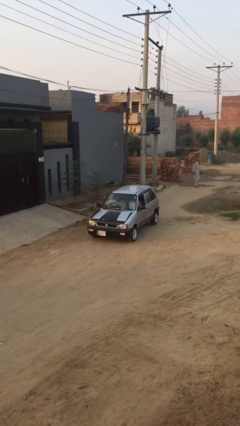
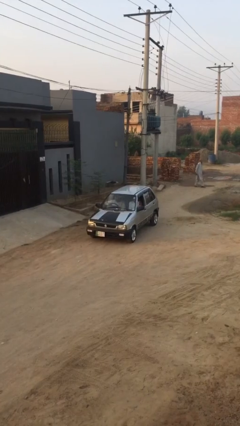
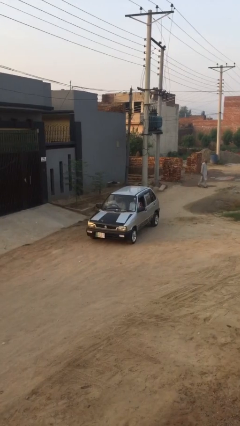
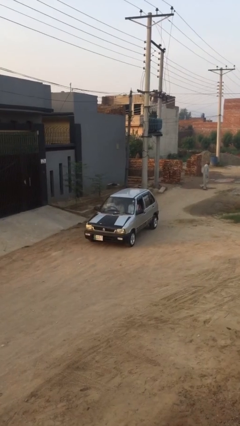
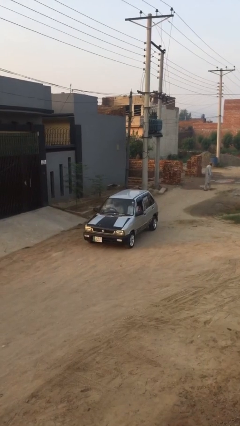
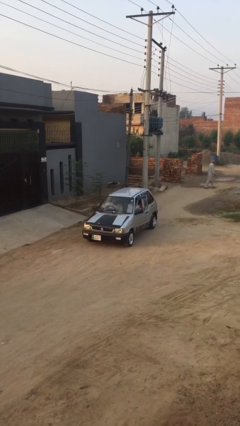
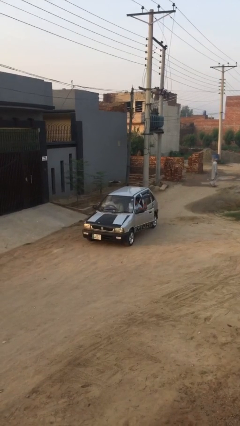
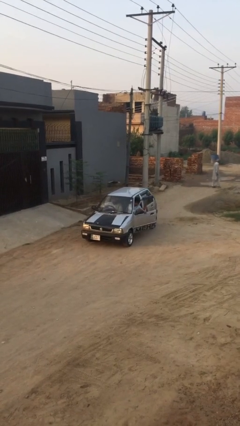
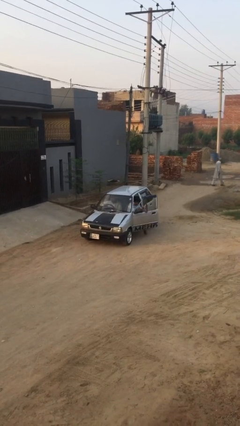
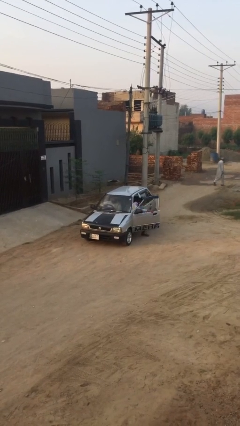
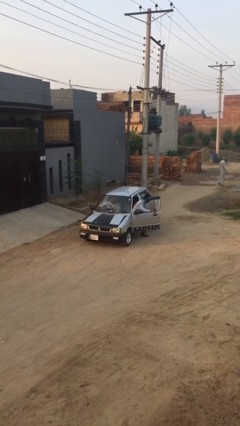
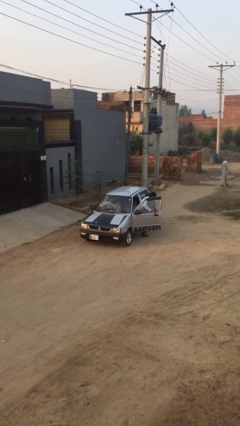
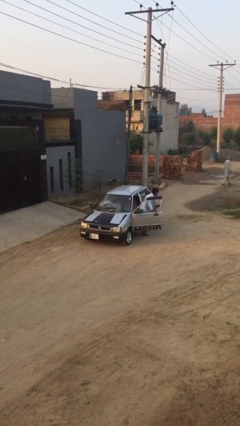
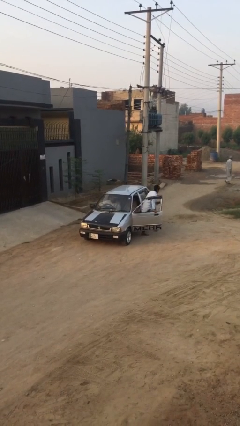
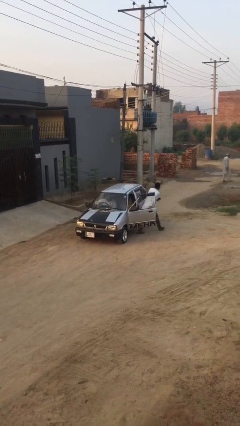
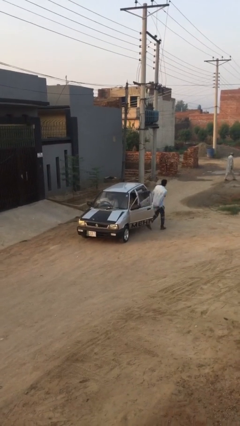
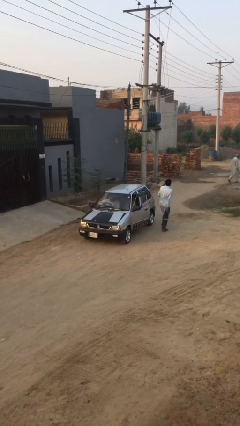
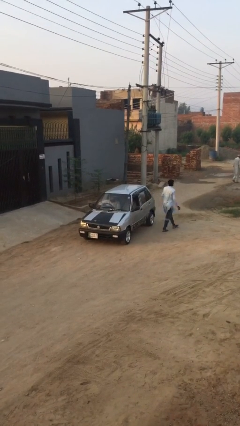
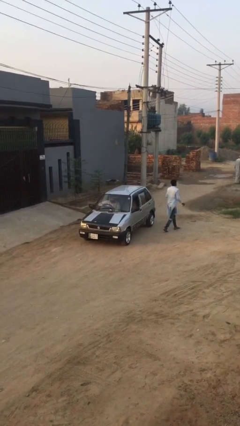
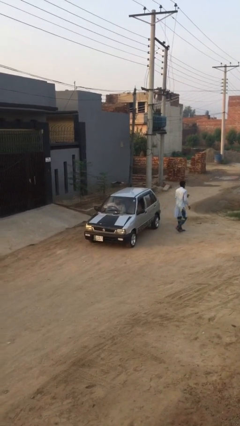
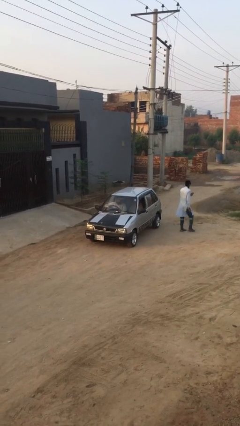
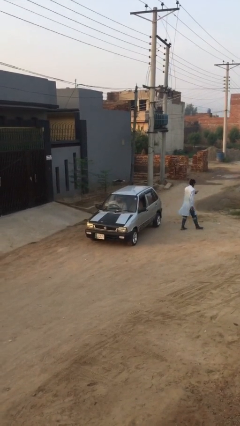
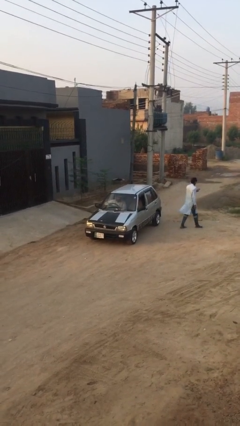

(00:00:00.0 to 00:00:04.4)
car drops off person

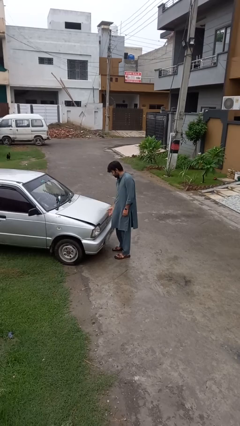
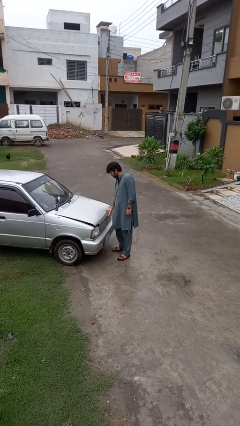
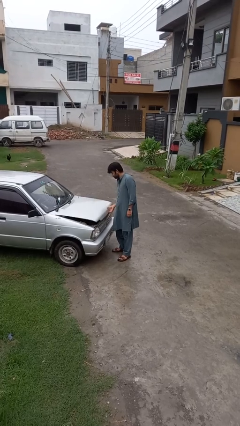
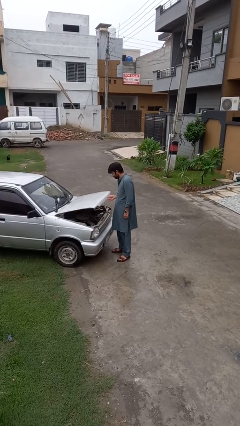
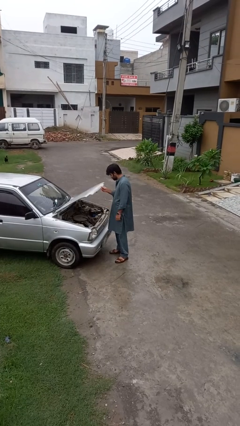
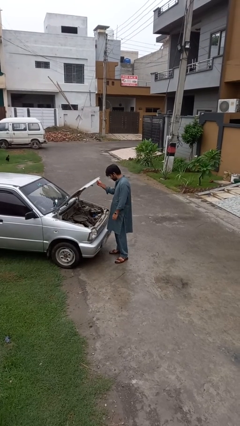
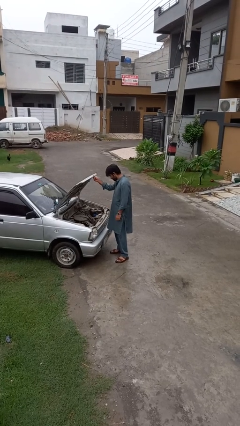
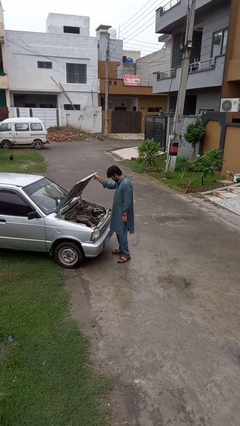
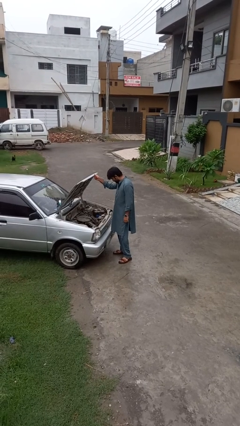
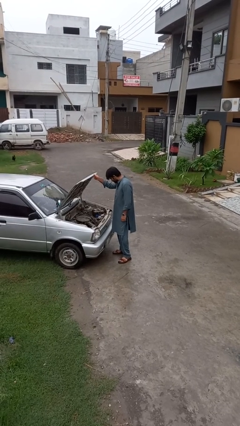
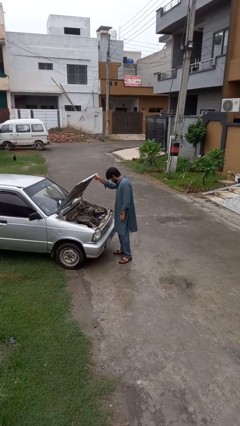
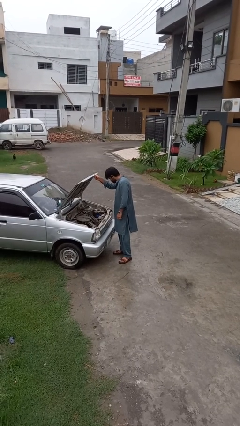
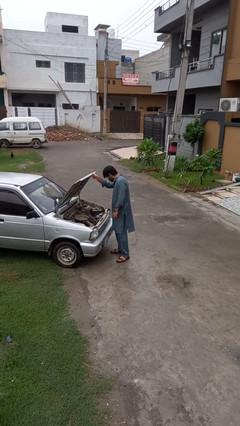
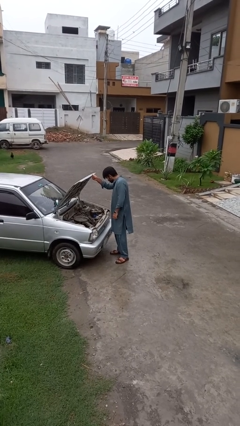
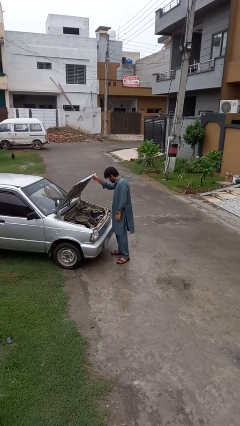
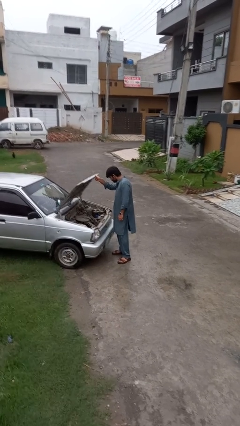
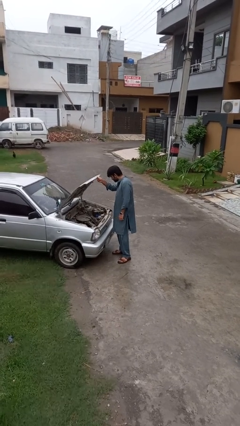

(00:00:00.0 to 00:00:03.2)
person opens car hood

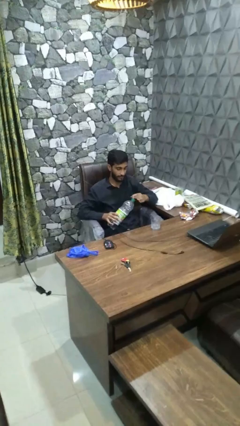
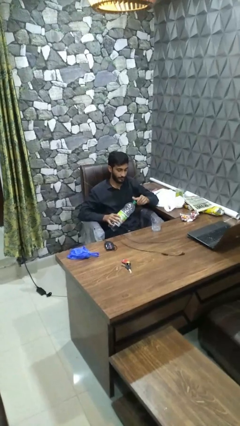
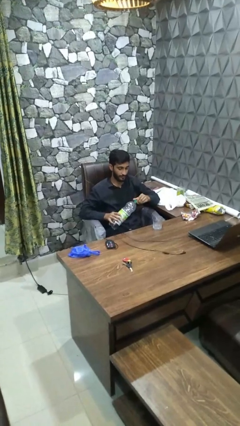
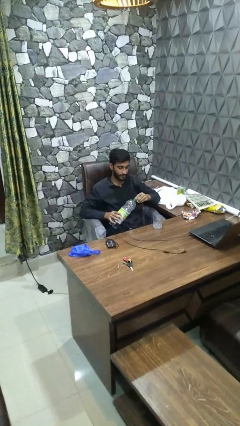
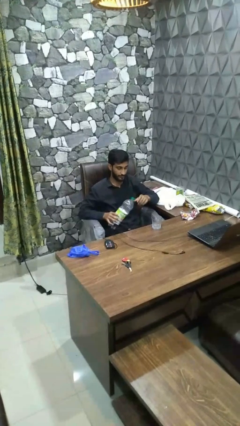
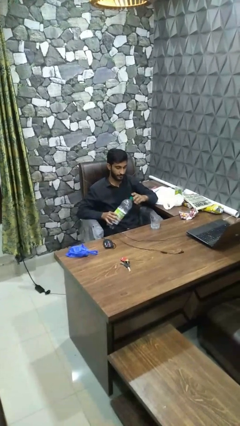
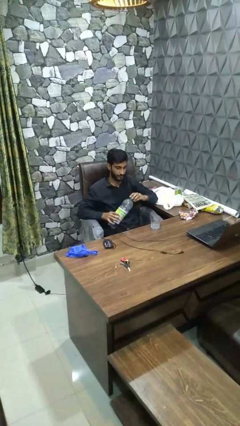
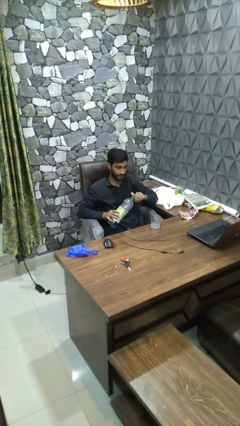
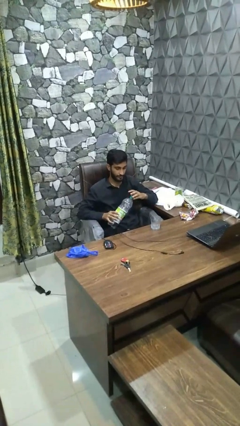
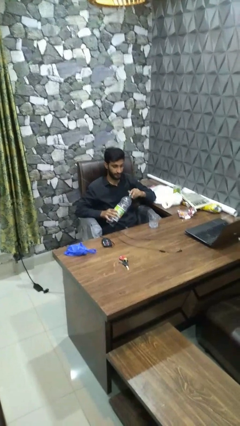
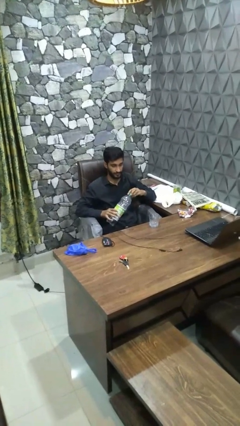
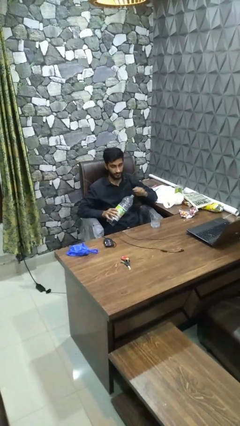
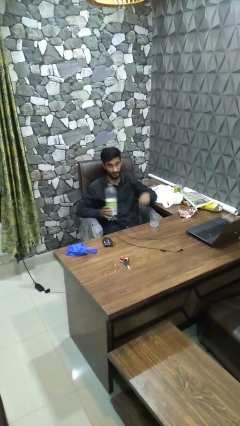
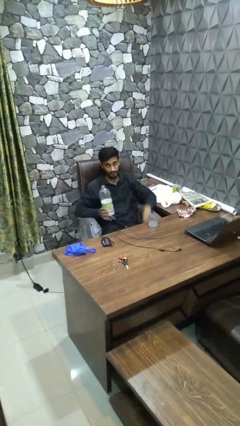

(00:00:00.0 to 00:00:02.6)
person unscrews lid from bottle

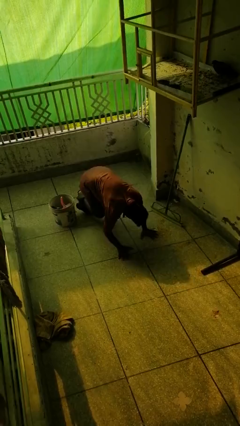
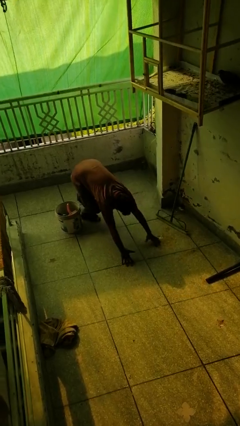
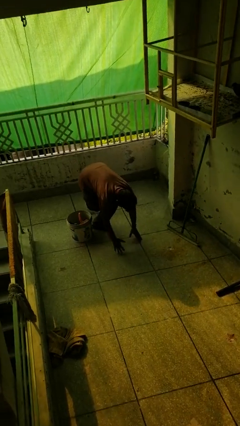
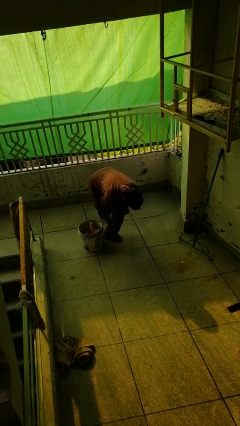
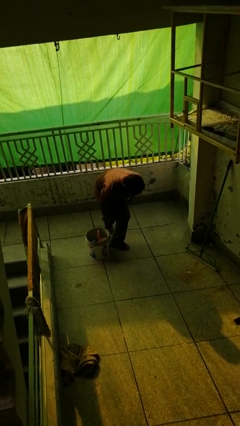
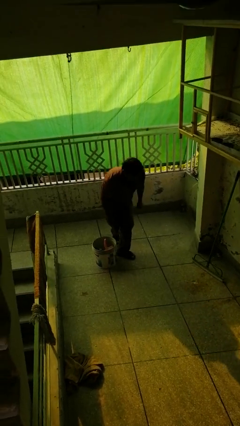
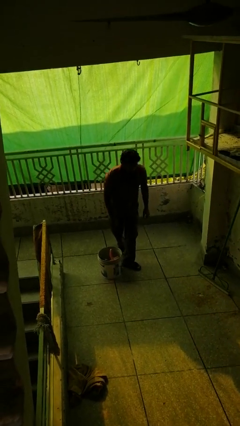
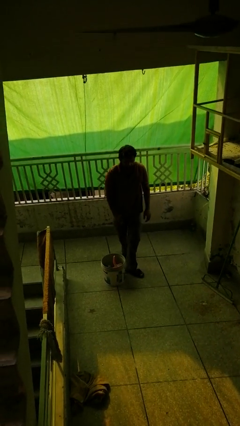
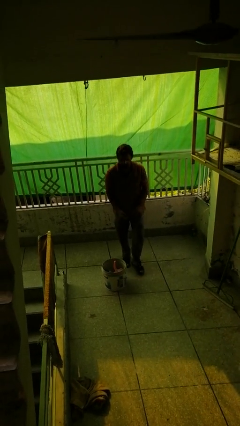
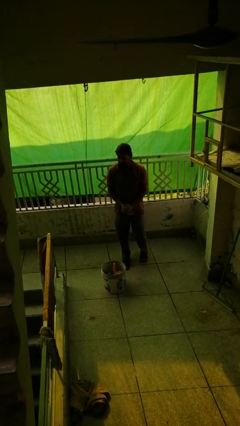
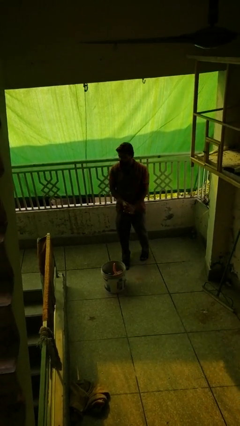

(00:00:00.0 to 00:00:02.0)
person stands up from floor

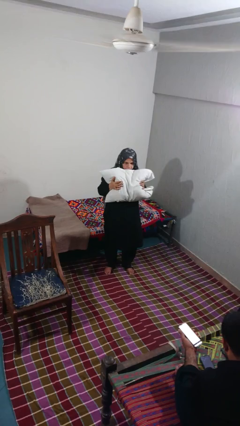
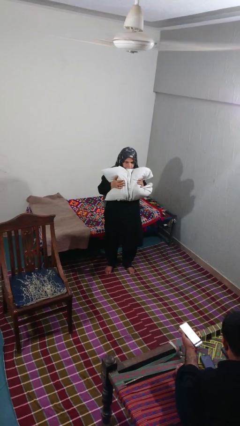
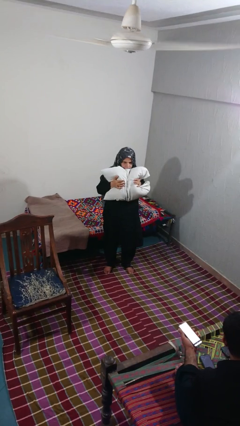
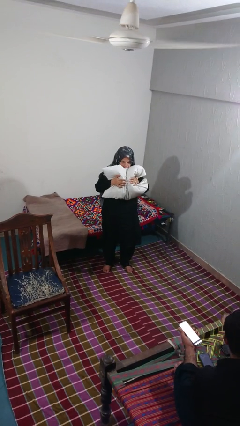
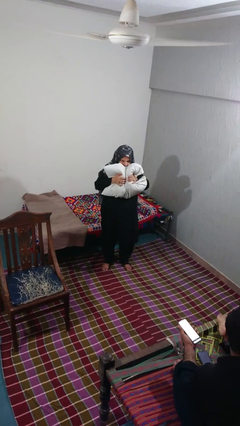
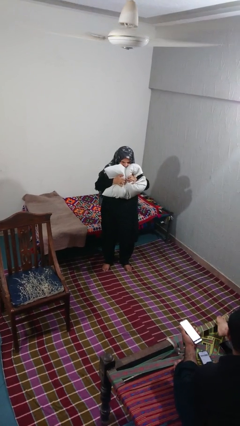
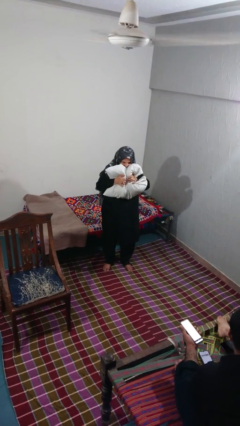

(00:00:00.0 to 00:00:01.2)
person squeezes object

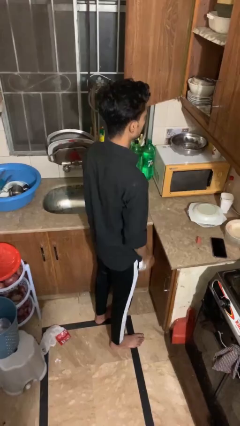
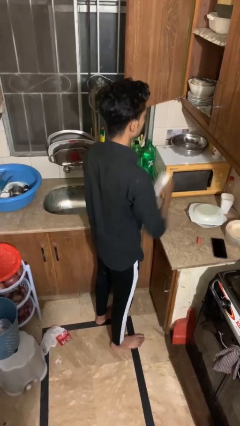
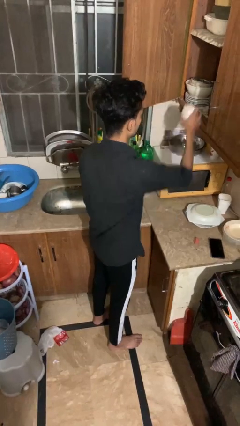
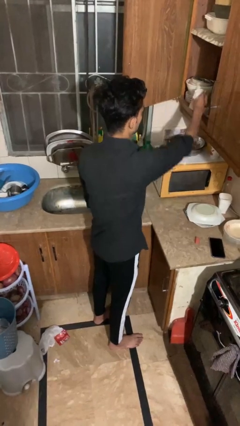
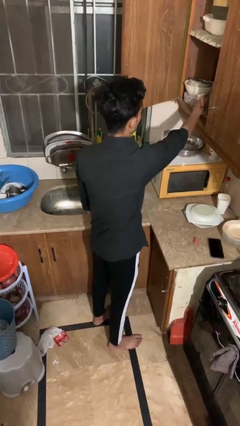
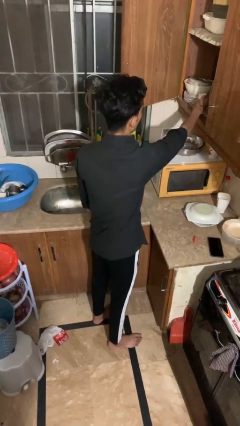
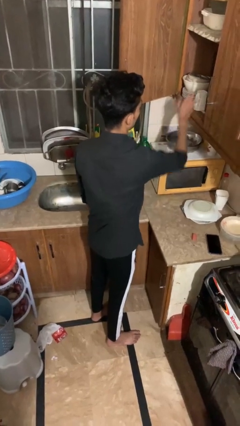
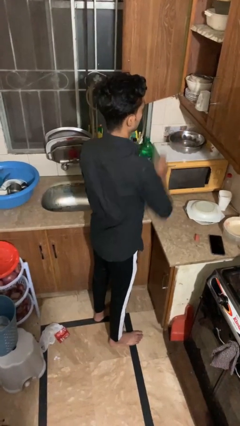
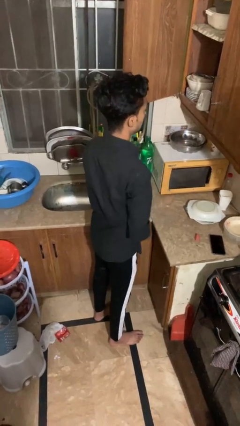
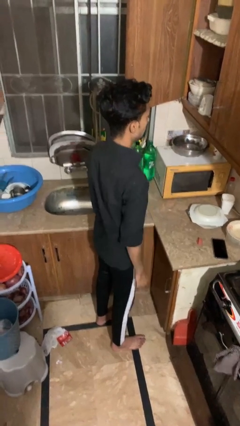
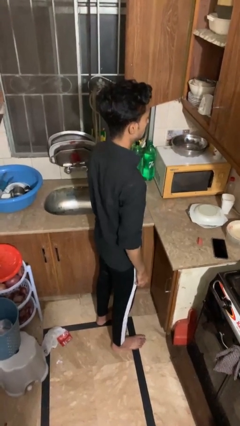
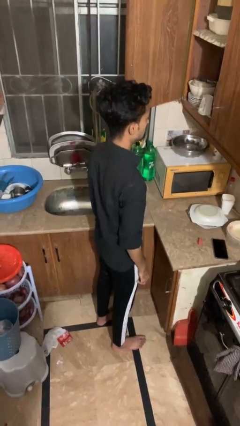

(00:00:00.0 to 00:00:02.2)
person puts down object into cabinet

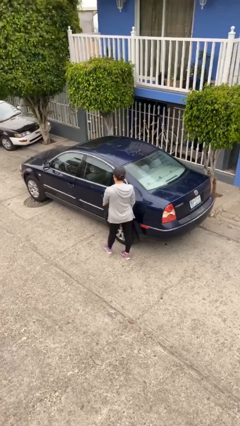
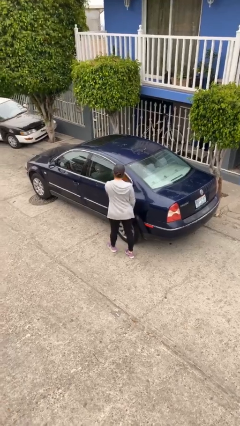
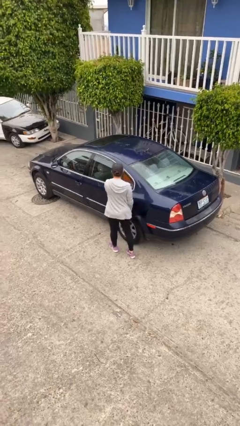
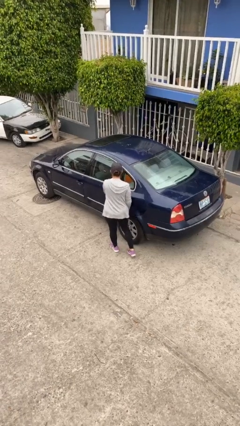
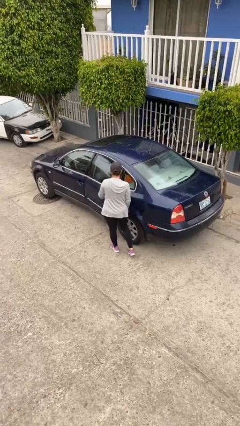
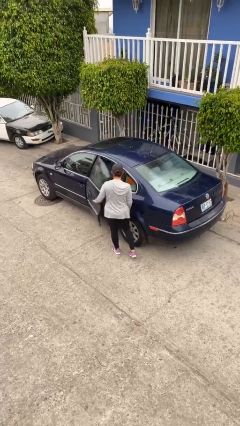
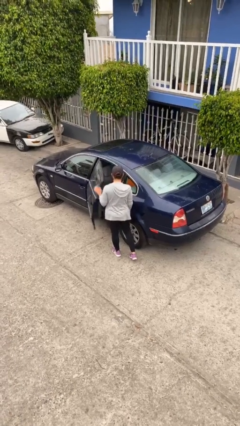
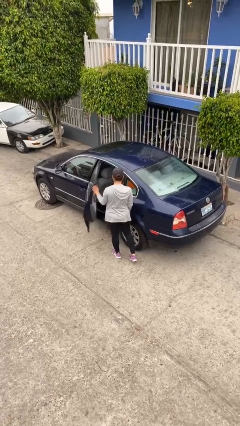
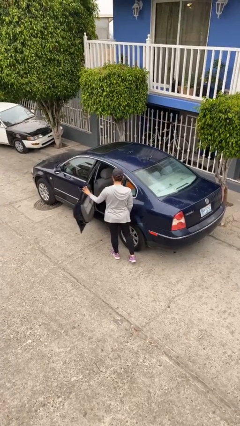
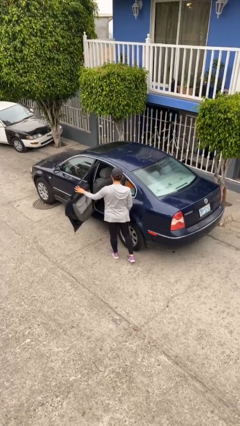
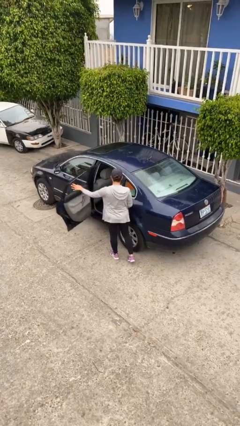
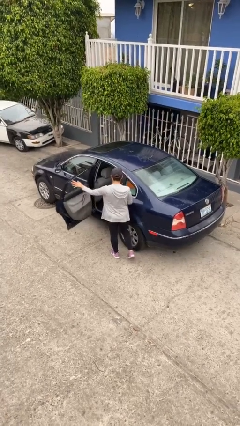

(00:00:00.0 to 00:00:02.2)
person opens car door
